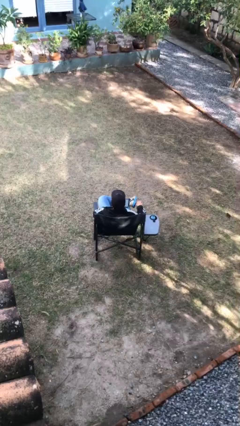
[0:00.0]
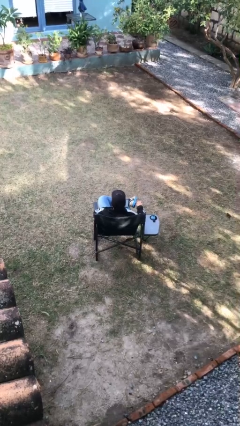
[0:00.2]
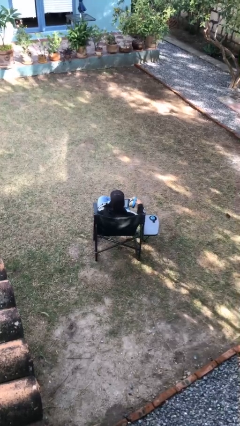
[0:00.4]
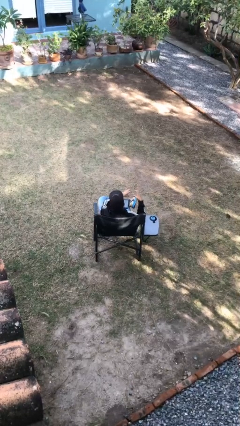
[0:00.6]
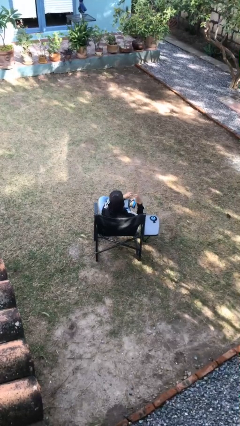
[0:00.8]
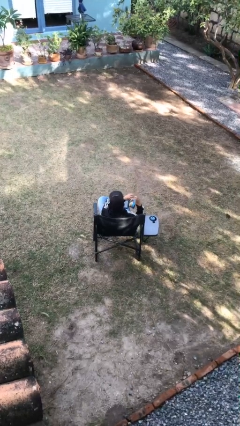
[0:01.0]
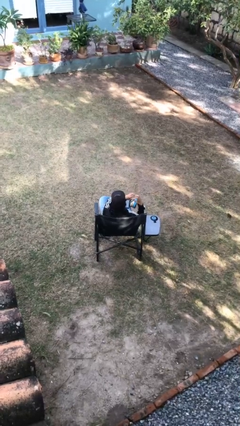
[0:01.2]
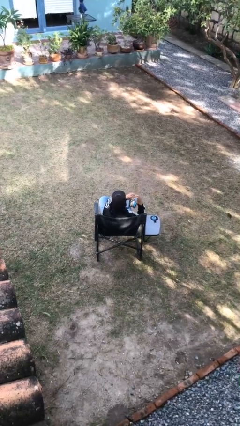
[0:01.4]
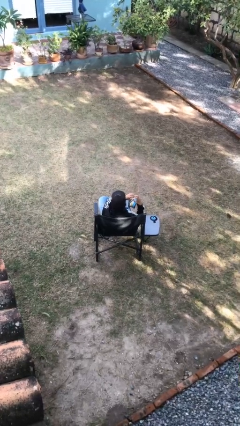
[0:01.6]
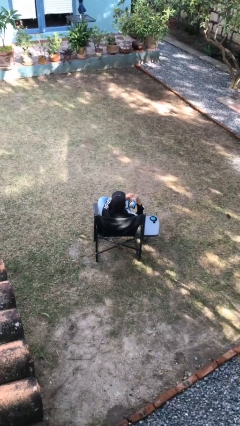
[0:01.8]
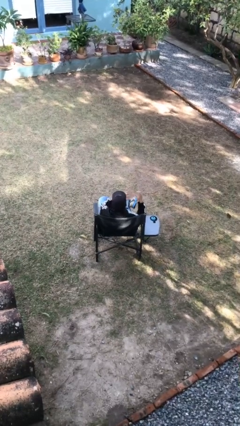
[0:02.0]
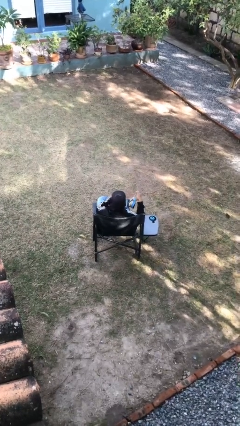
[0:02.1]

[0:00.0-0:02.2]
person gestures heart

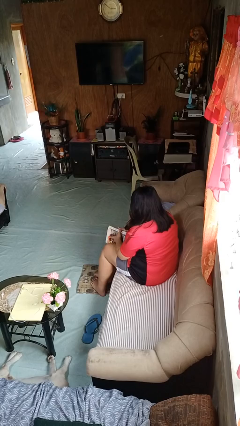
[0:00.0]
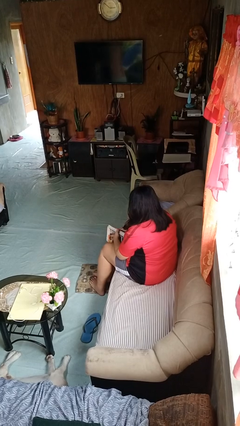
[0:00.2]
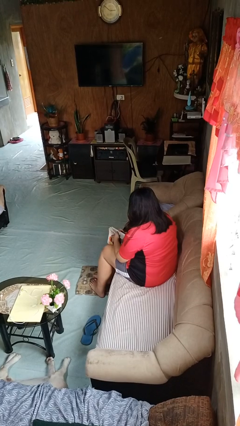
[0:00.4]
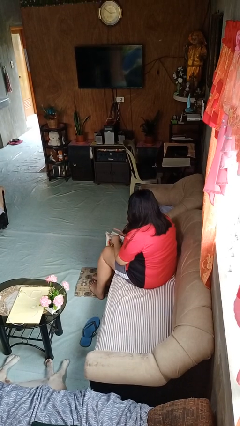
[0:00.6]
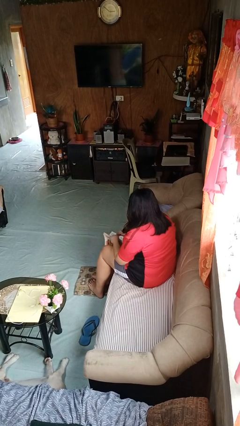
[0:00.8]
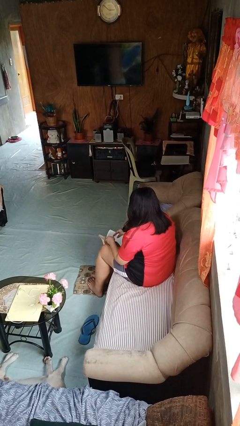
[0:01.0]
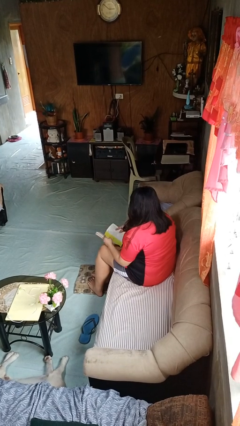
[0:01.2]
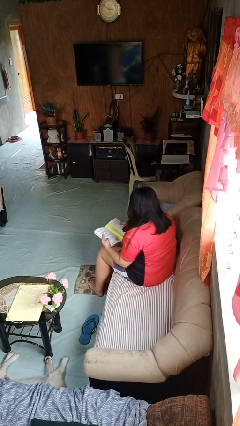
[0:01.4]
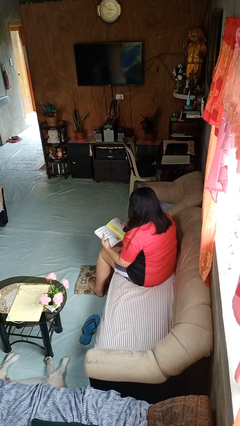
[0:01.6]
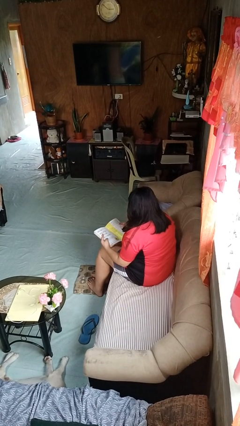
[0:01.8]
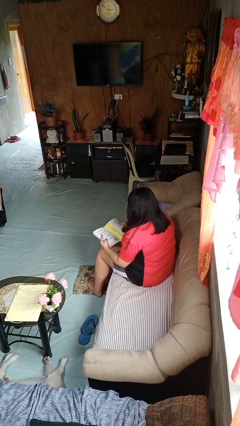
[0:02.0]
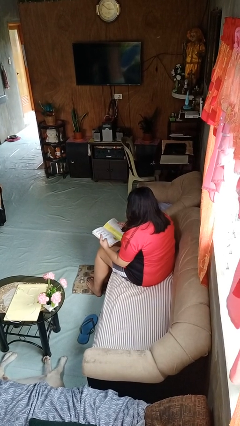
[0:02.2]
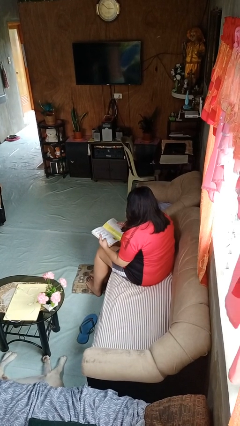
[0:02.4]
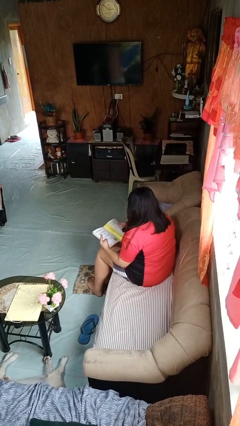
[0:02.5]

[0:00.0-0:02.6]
person reads book

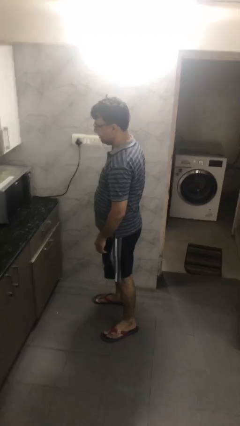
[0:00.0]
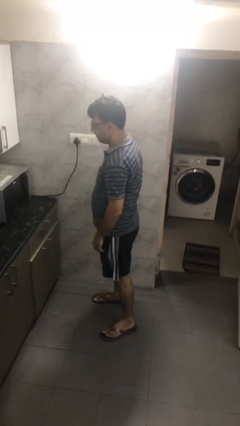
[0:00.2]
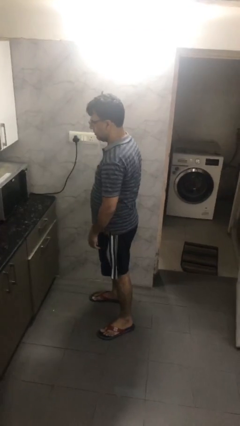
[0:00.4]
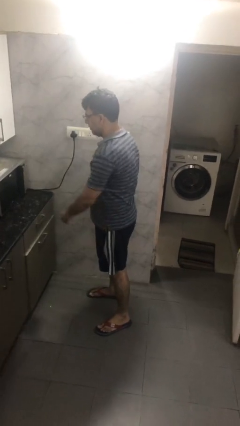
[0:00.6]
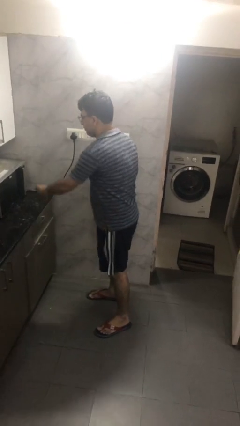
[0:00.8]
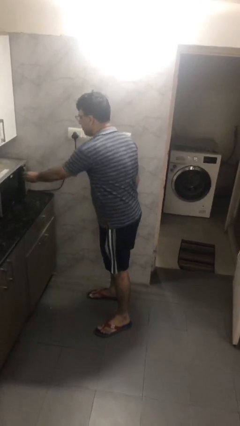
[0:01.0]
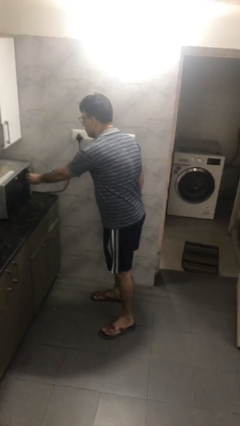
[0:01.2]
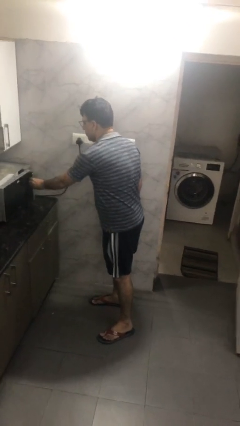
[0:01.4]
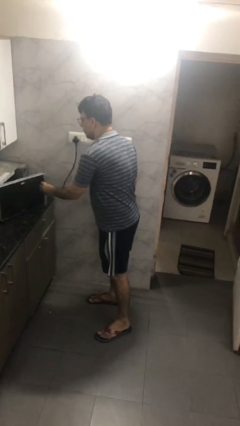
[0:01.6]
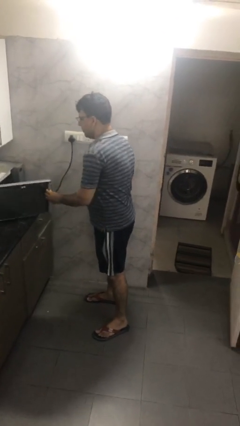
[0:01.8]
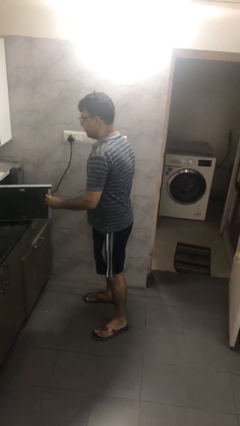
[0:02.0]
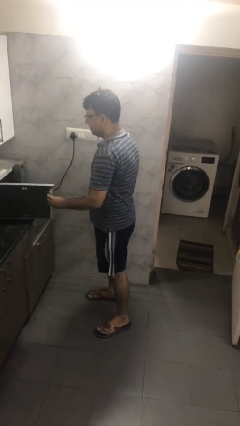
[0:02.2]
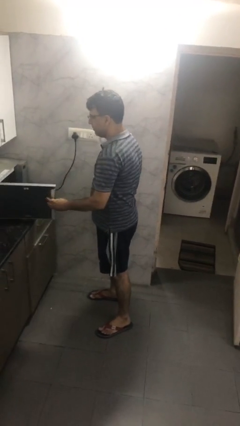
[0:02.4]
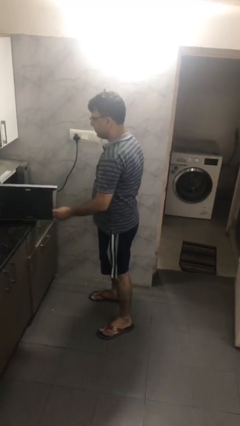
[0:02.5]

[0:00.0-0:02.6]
person opens microwave

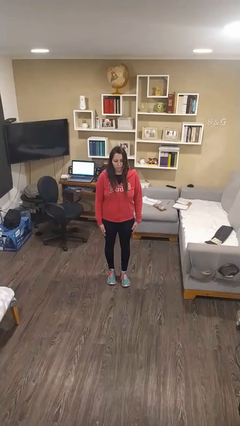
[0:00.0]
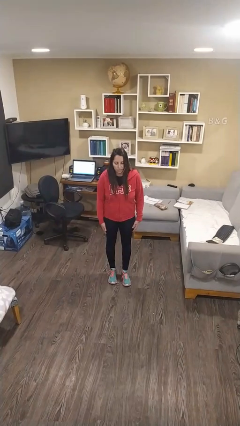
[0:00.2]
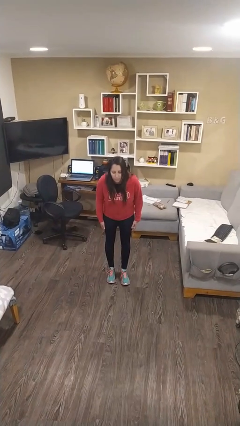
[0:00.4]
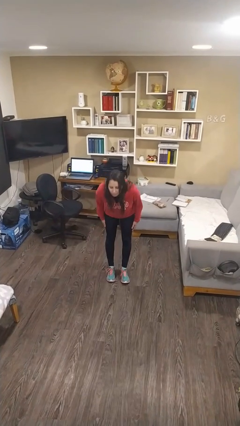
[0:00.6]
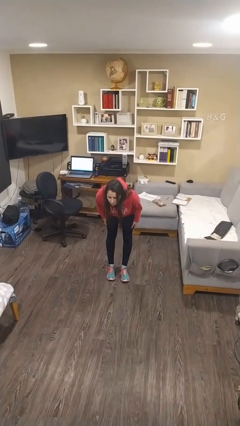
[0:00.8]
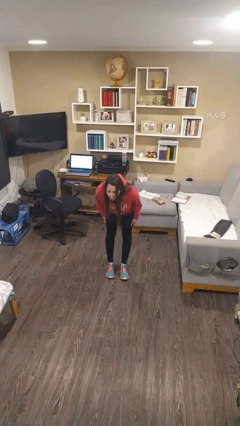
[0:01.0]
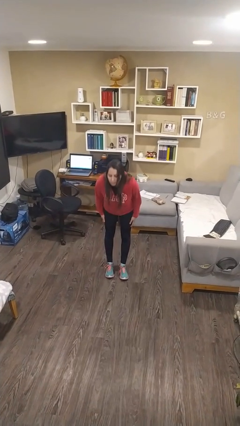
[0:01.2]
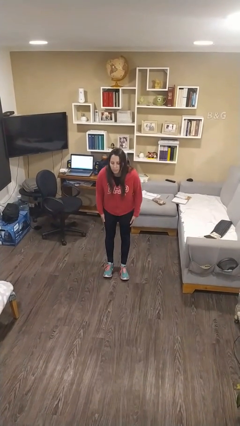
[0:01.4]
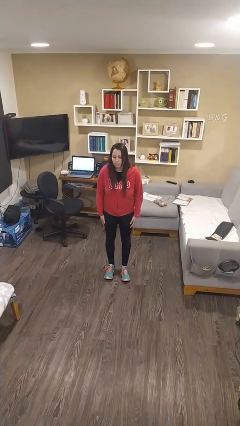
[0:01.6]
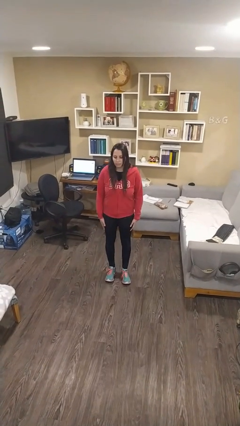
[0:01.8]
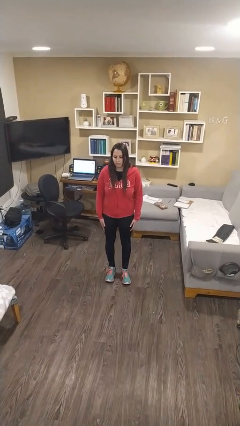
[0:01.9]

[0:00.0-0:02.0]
person bows

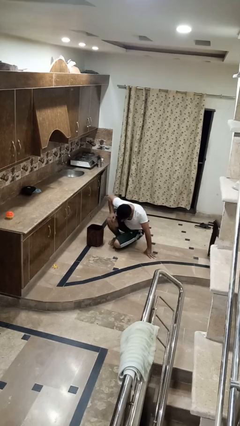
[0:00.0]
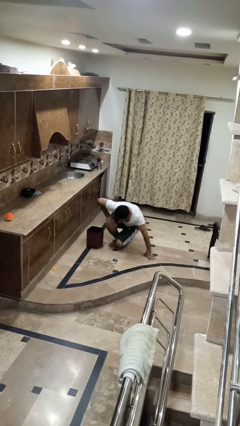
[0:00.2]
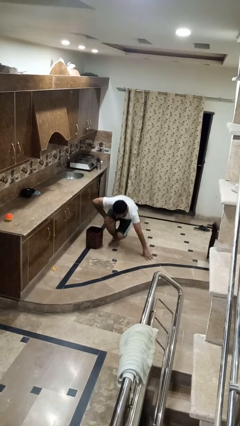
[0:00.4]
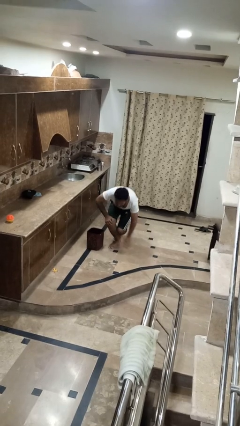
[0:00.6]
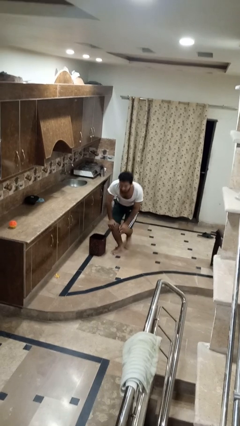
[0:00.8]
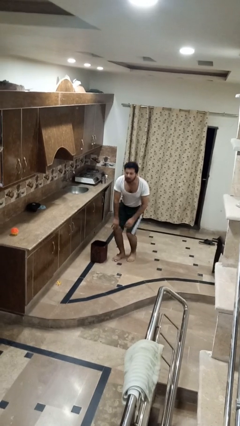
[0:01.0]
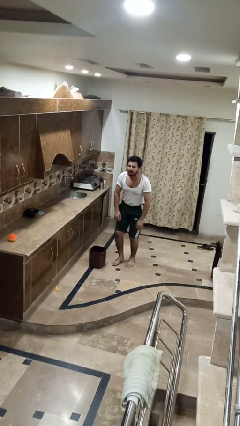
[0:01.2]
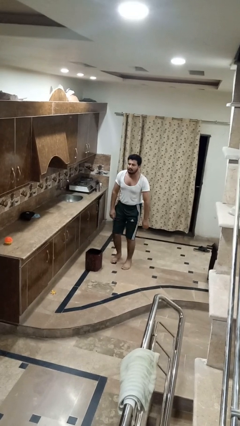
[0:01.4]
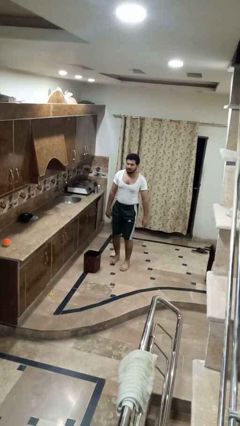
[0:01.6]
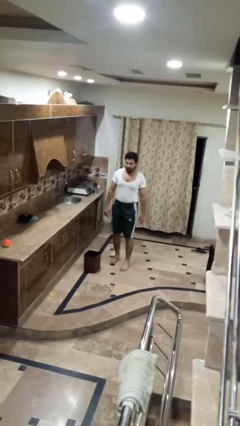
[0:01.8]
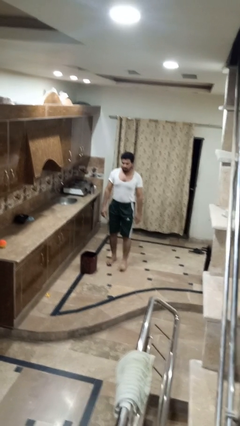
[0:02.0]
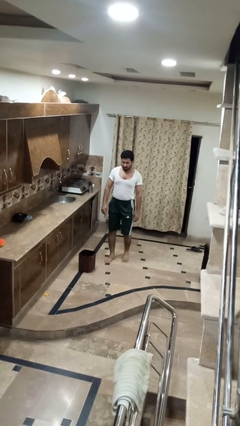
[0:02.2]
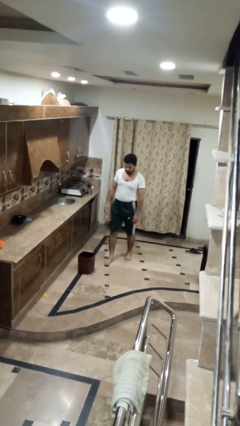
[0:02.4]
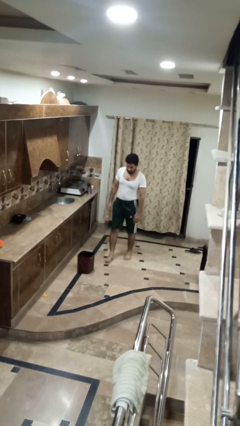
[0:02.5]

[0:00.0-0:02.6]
person stands up from floor

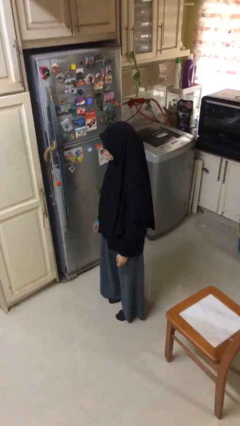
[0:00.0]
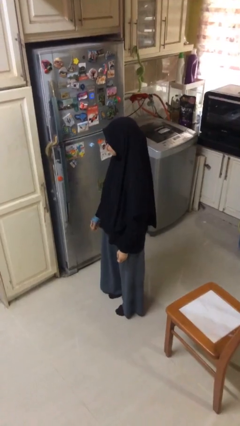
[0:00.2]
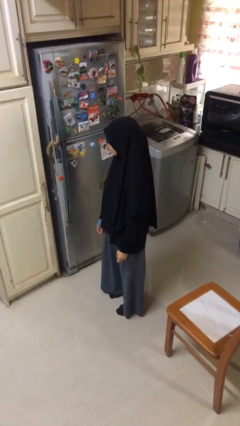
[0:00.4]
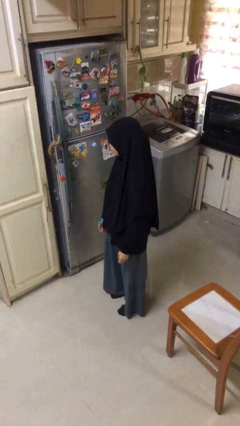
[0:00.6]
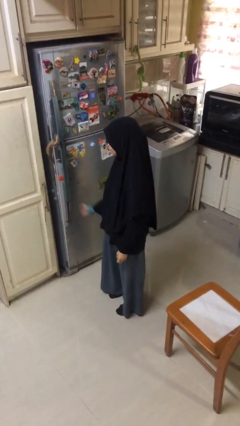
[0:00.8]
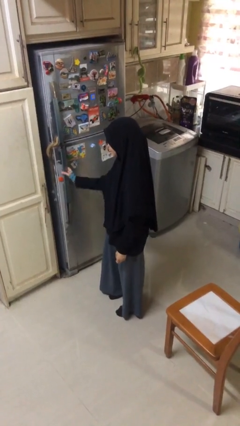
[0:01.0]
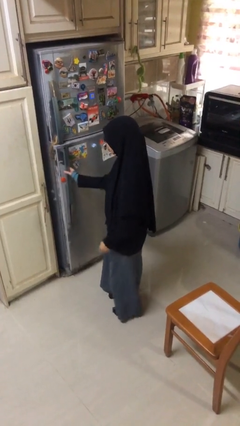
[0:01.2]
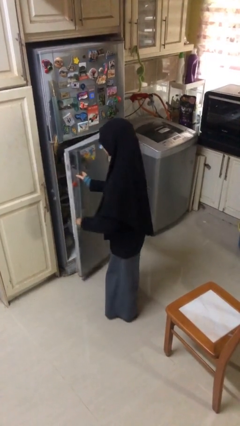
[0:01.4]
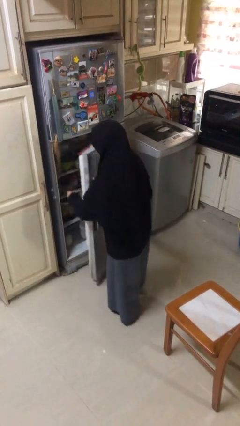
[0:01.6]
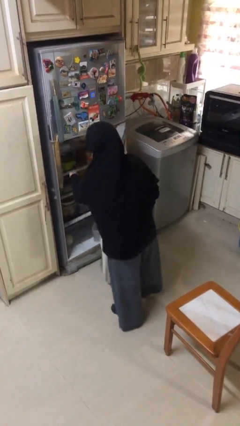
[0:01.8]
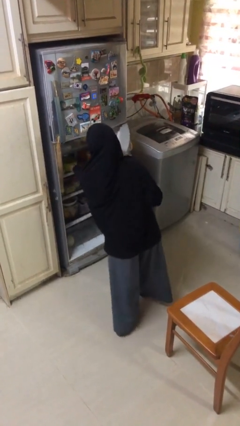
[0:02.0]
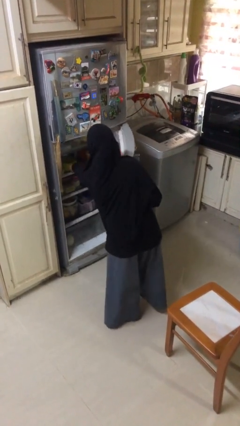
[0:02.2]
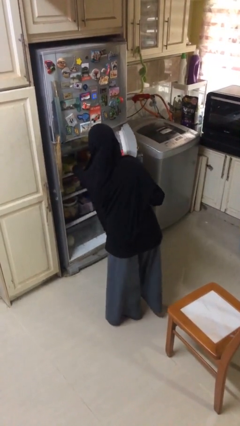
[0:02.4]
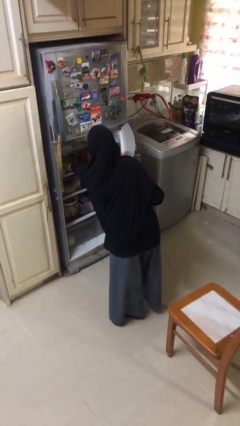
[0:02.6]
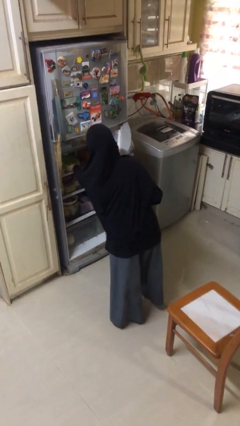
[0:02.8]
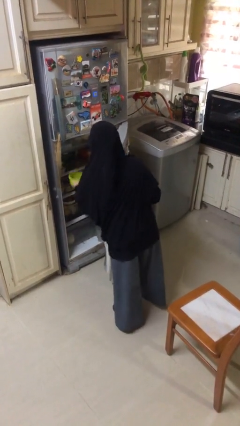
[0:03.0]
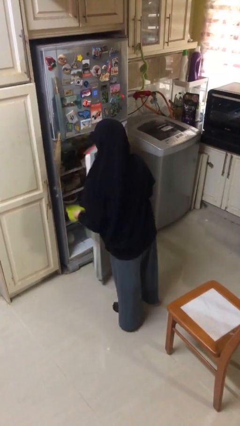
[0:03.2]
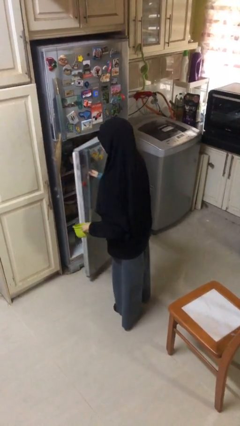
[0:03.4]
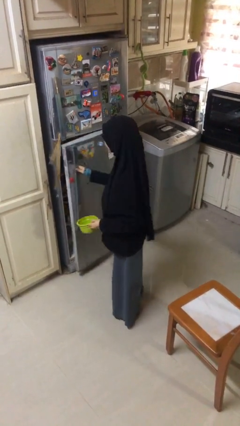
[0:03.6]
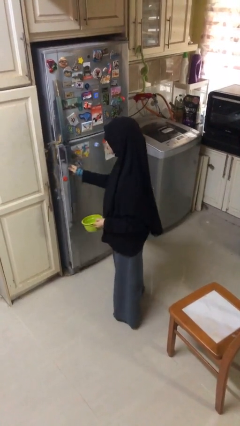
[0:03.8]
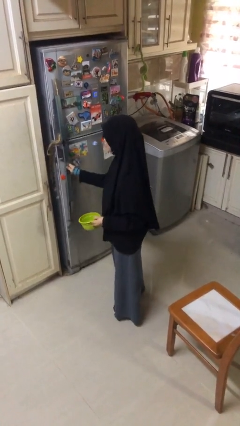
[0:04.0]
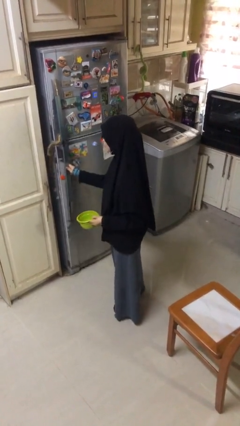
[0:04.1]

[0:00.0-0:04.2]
person takes object from refrigerator

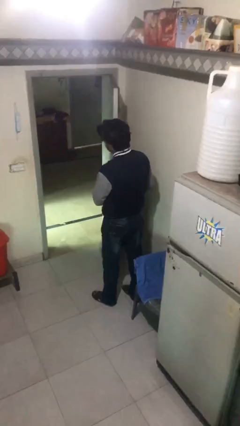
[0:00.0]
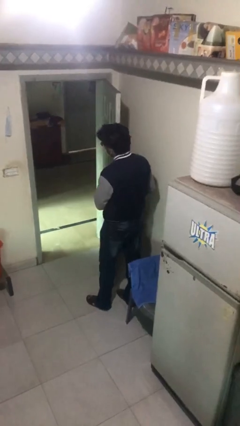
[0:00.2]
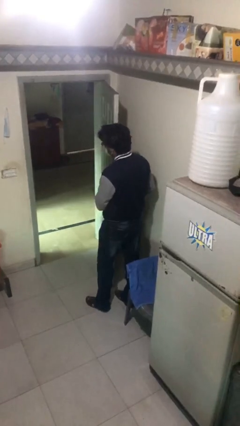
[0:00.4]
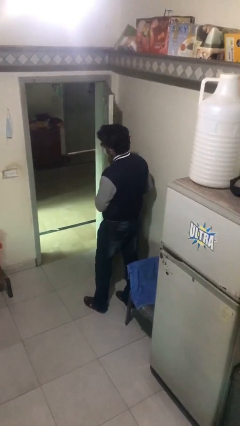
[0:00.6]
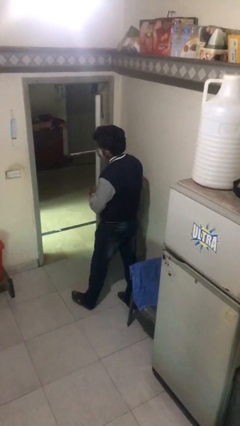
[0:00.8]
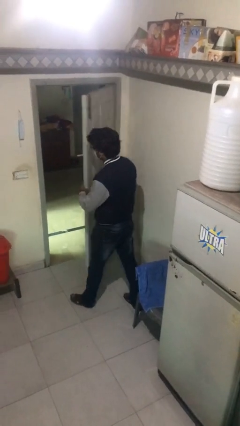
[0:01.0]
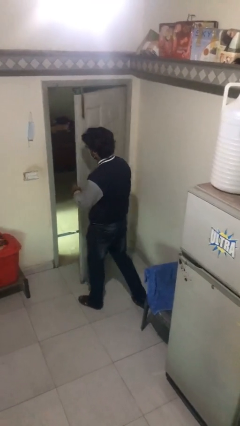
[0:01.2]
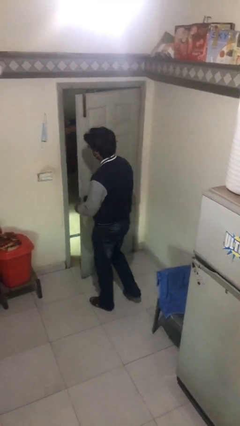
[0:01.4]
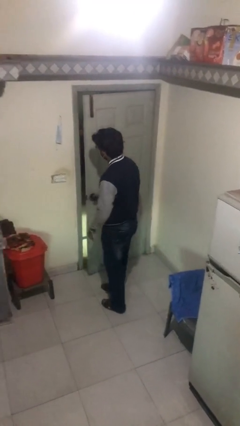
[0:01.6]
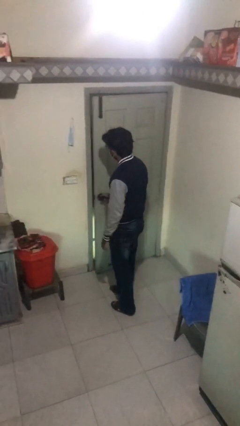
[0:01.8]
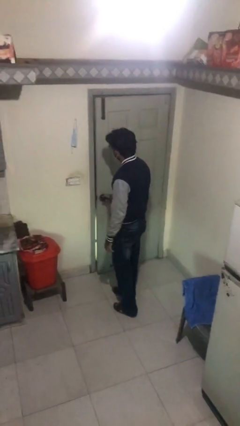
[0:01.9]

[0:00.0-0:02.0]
person closes facility door
